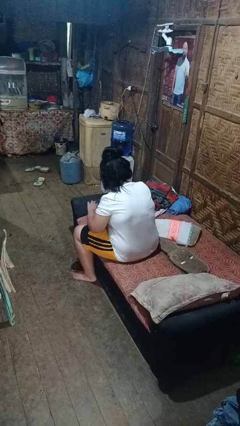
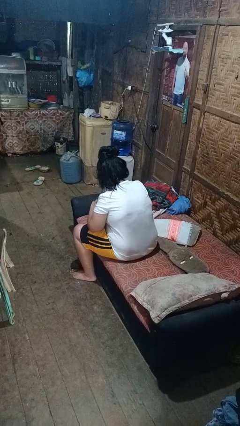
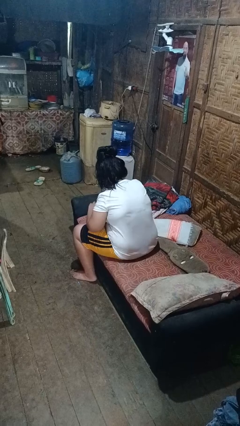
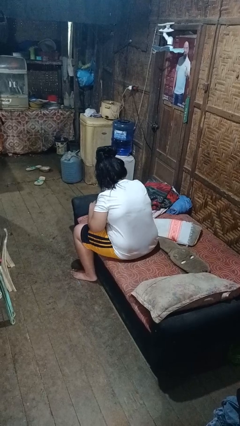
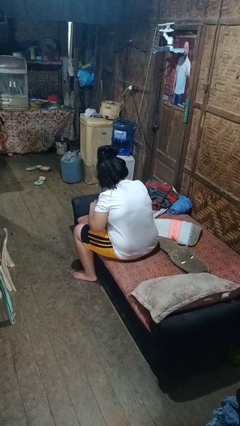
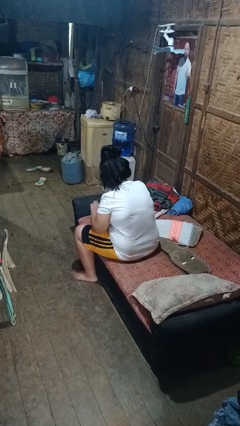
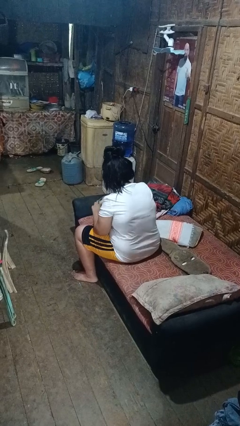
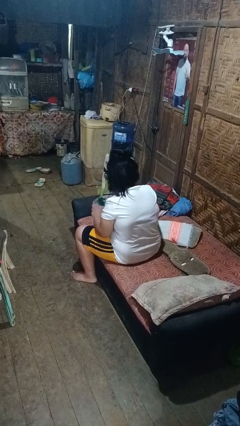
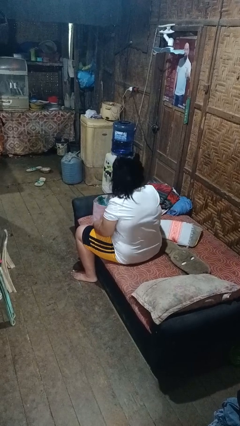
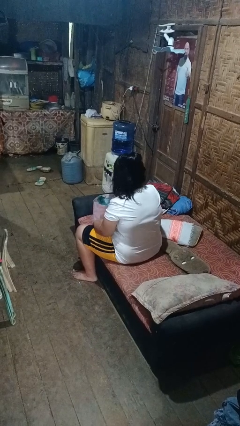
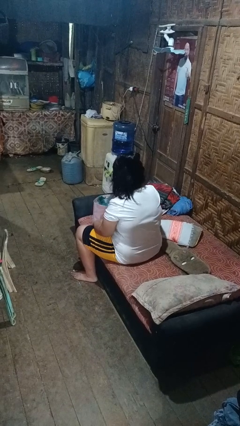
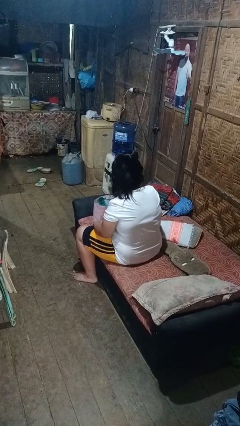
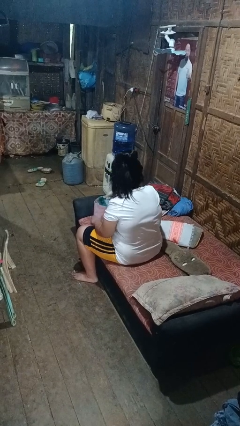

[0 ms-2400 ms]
person searches in bag

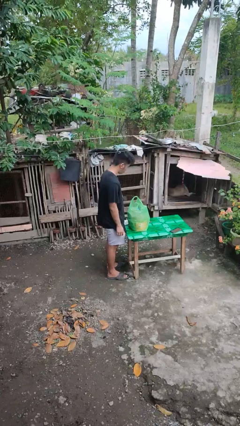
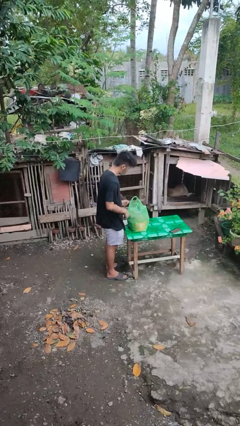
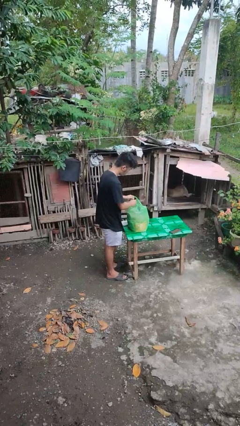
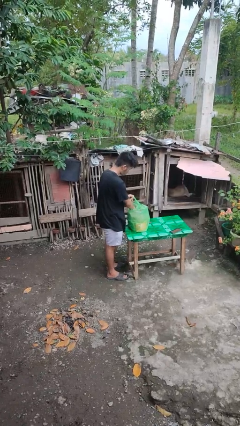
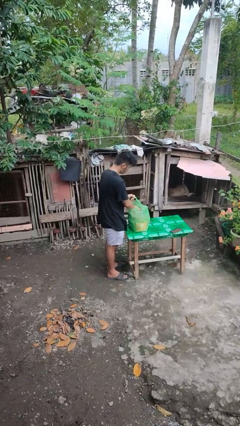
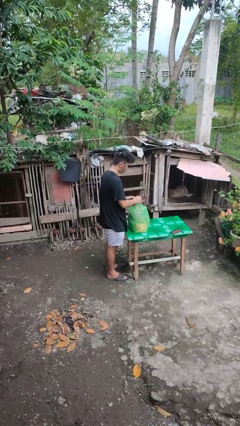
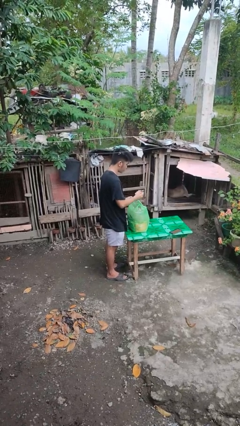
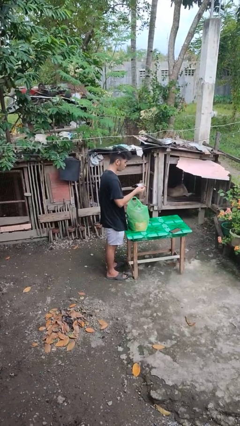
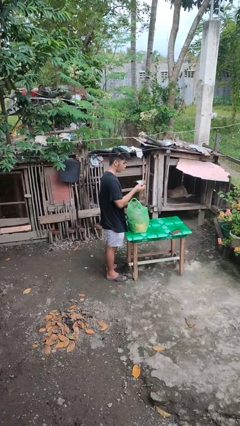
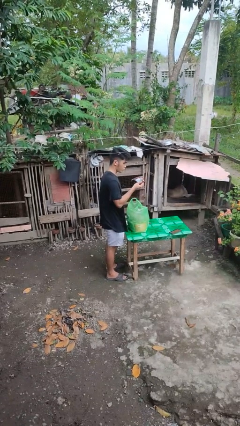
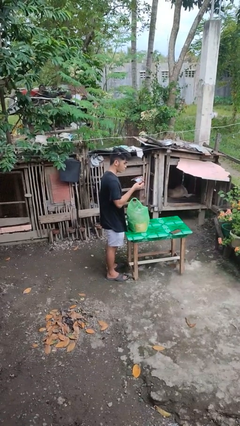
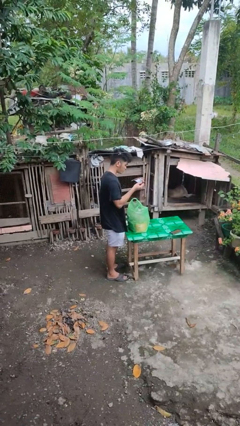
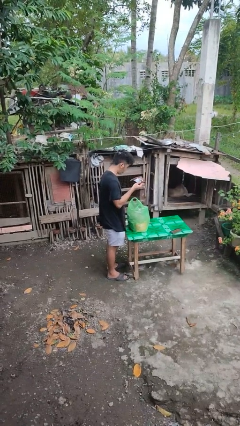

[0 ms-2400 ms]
person takes object from bag

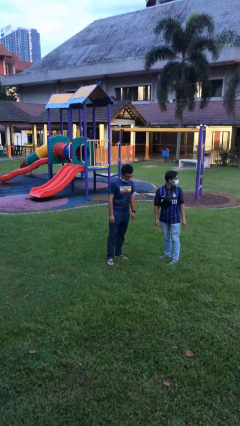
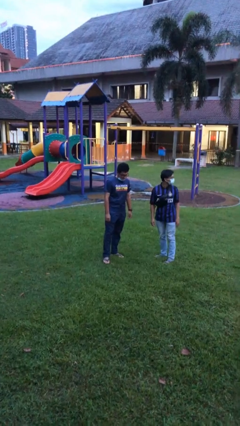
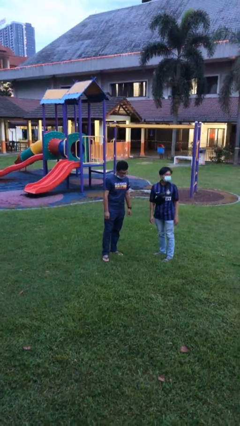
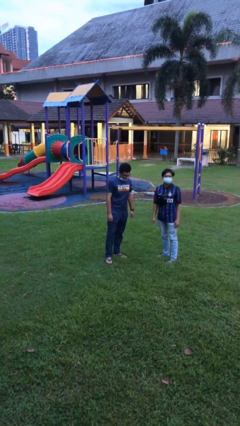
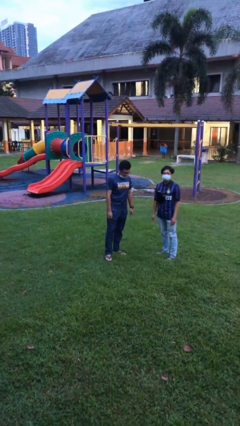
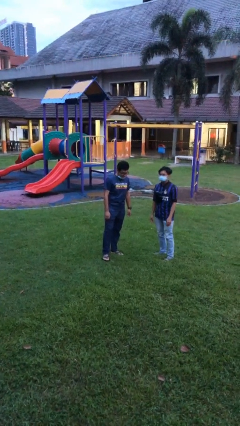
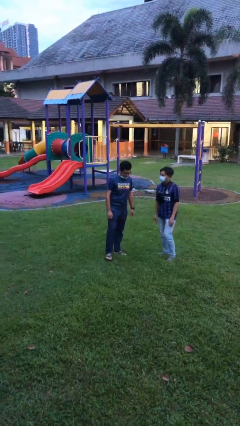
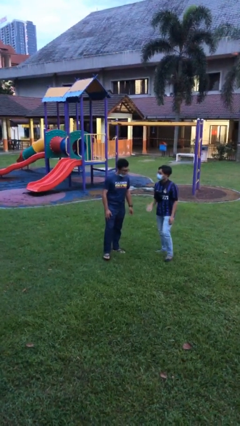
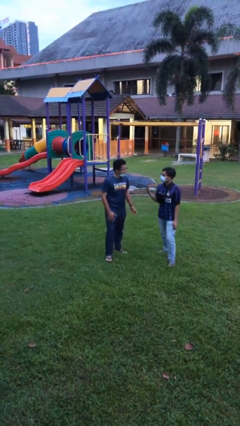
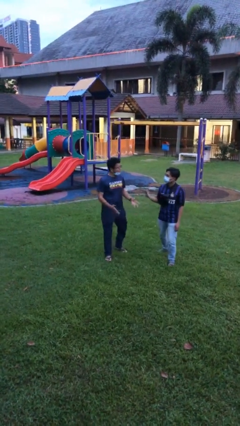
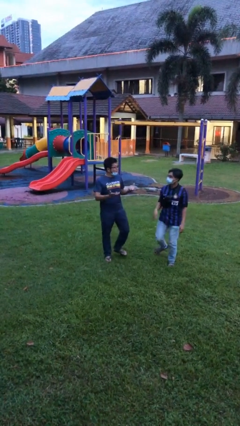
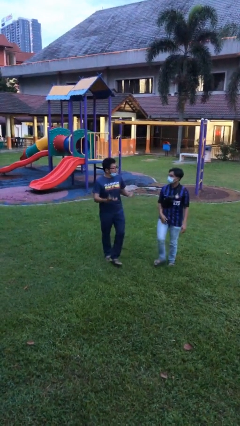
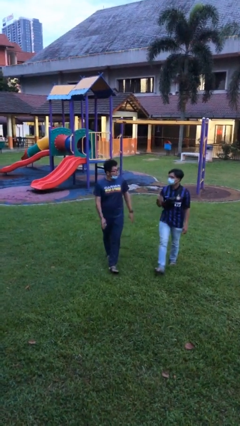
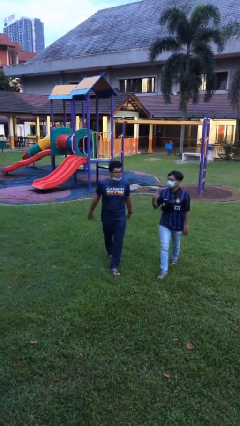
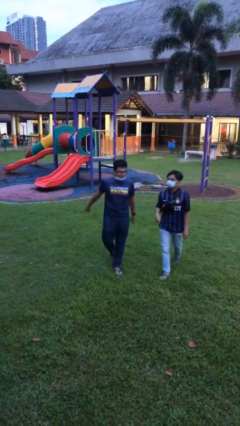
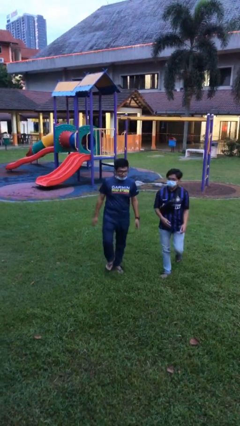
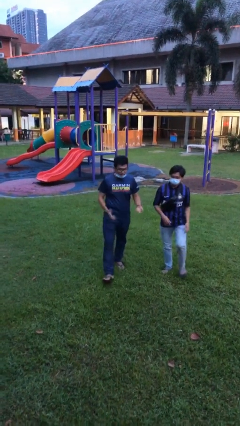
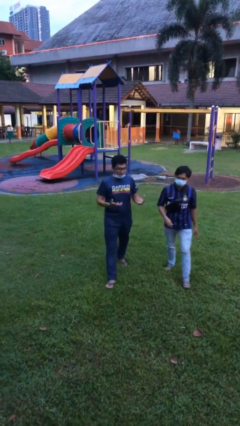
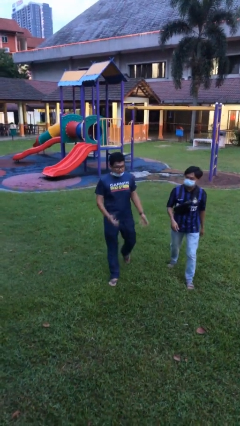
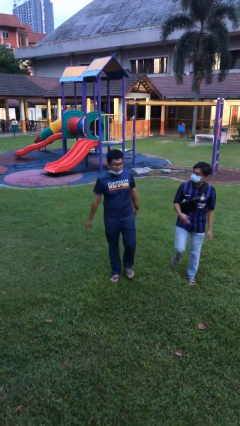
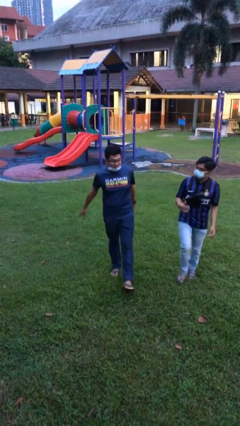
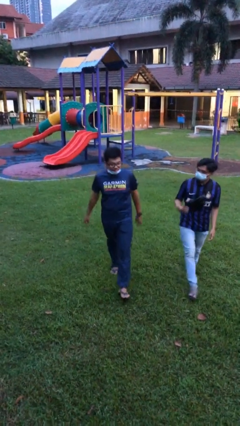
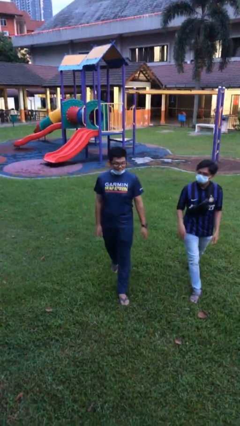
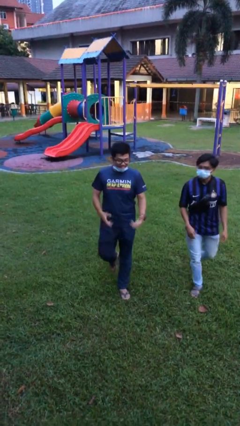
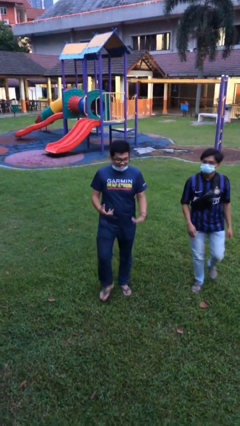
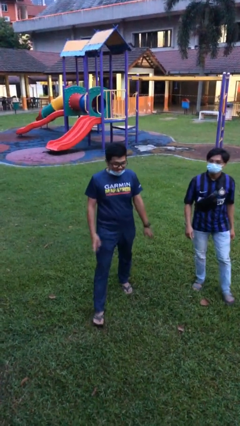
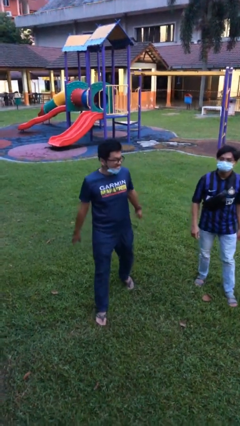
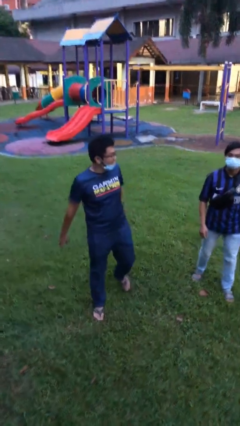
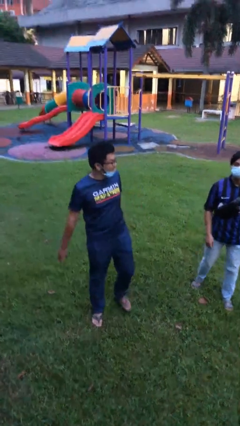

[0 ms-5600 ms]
person talks to person

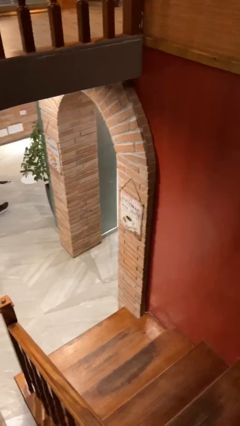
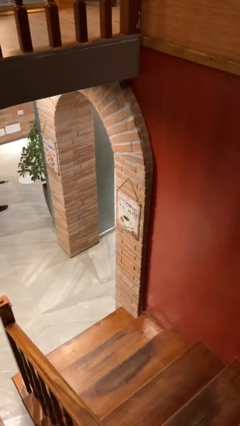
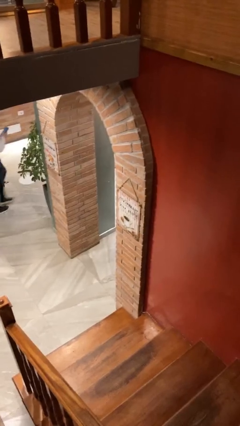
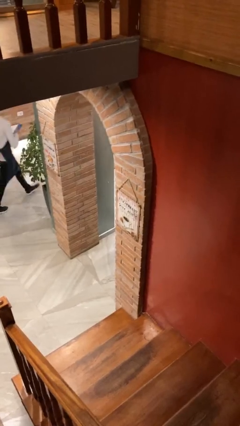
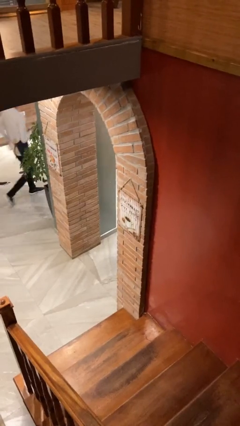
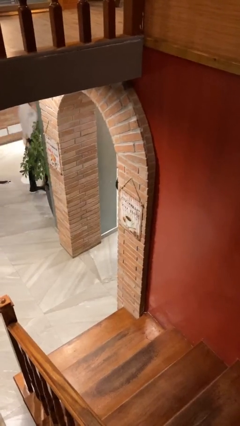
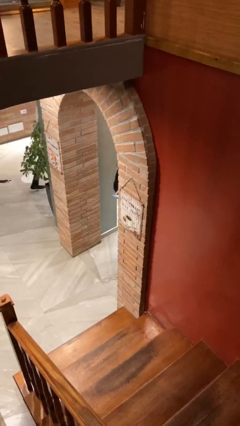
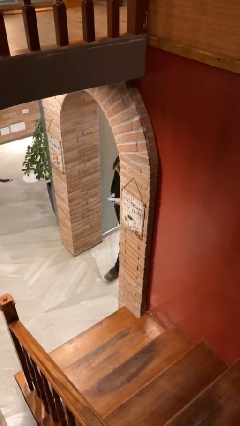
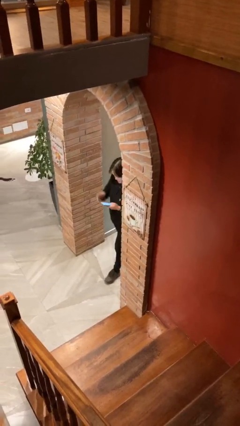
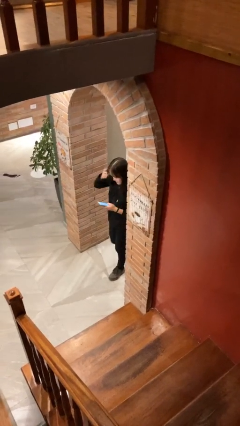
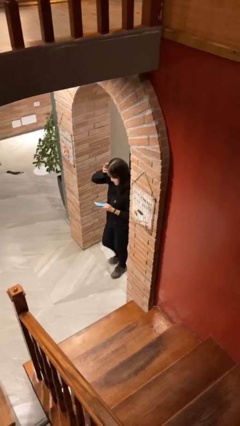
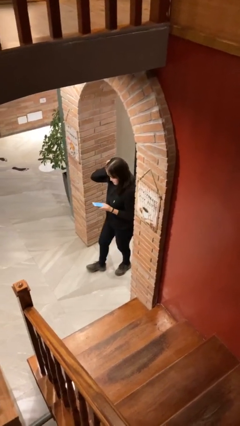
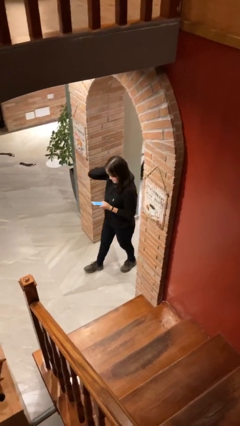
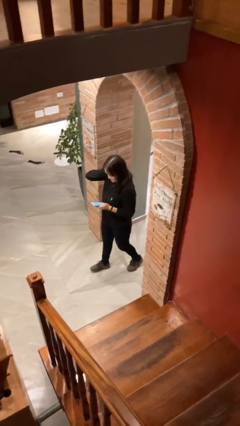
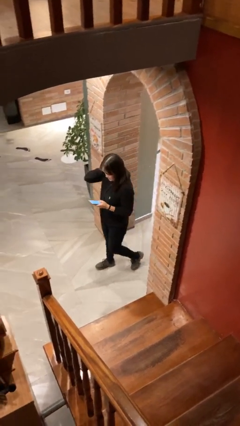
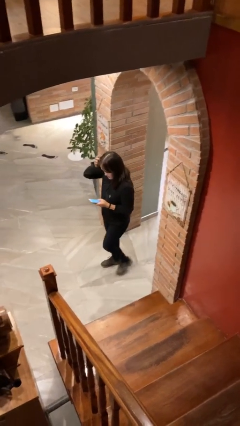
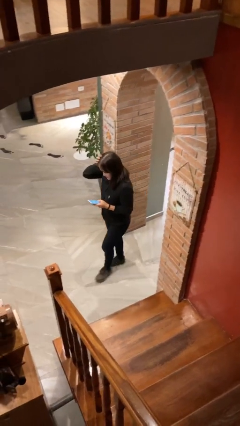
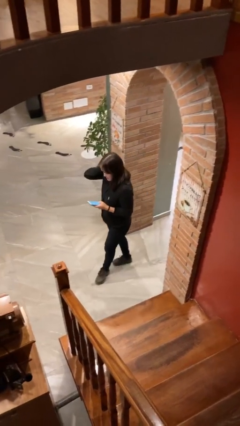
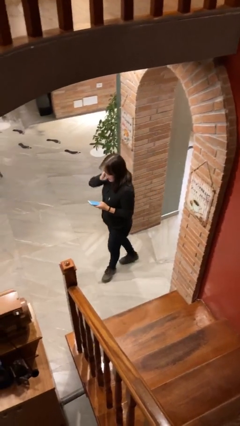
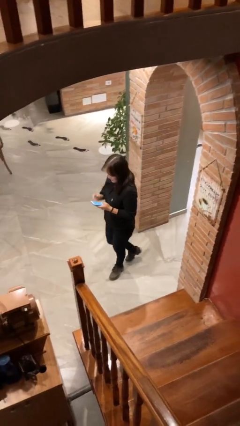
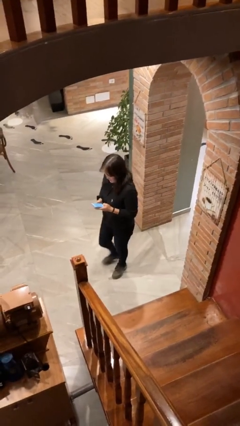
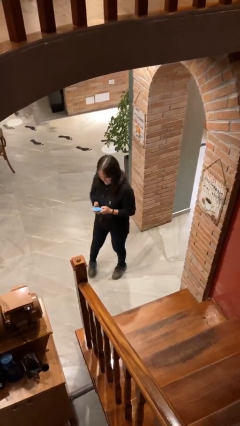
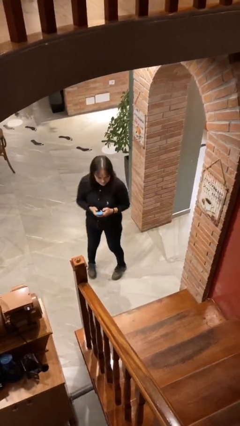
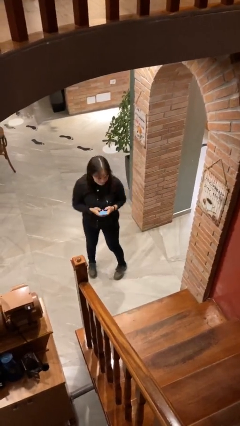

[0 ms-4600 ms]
person enters scene through structure

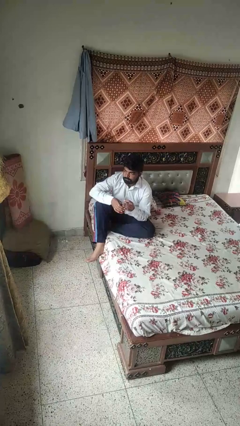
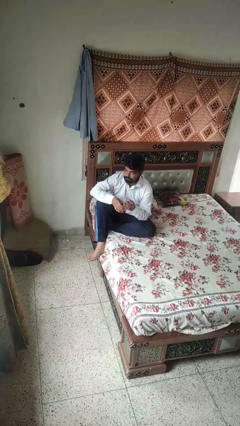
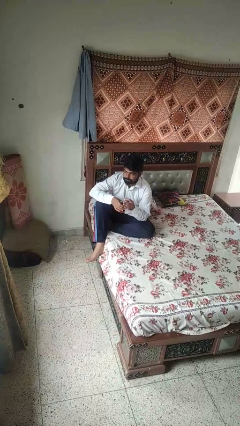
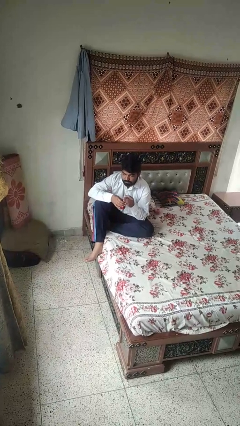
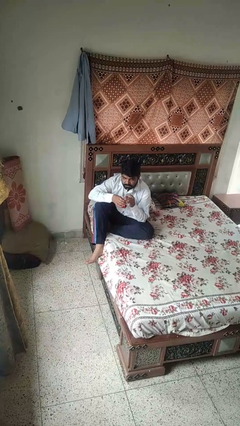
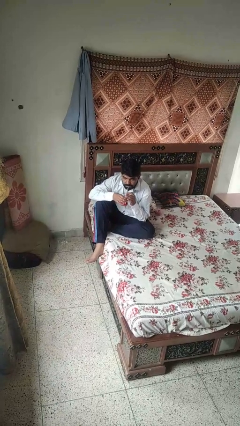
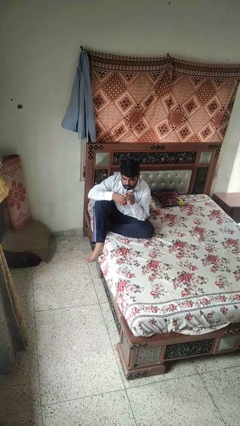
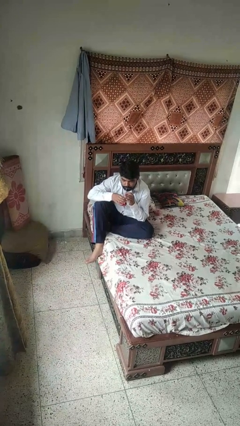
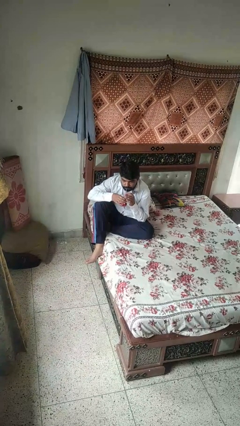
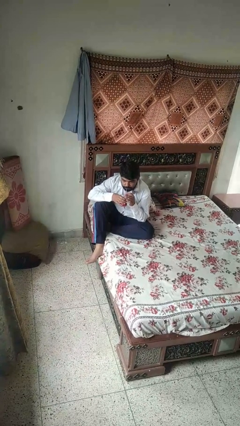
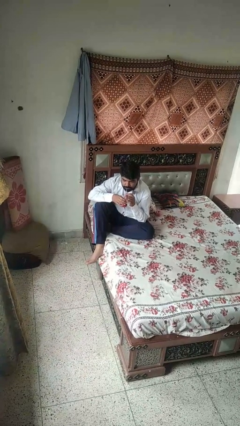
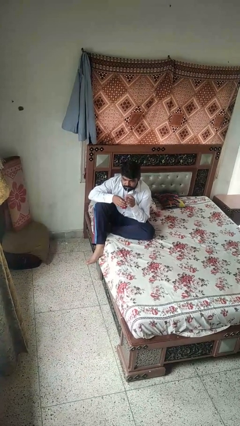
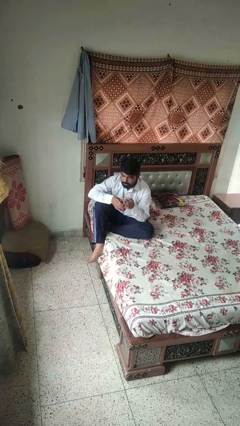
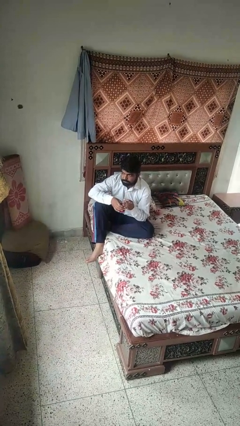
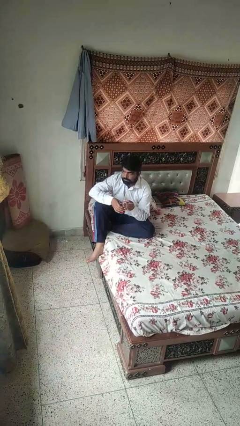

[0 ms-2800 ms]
person drinks from straw
